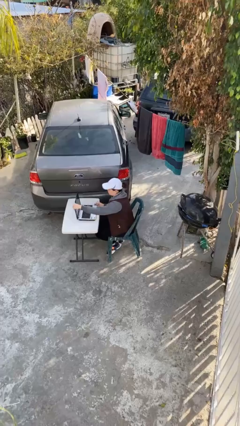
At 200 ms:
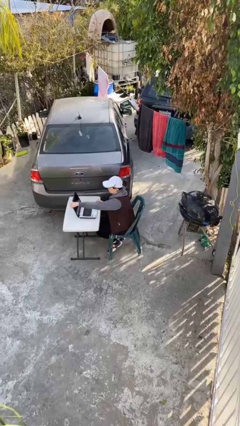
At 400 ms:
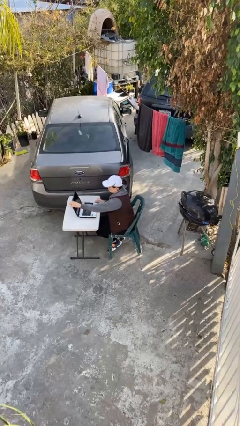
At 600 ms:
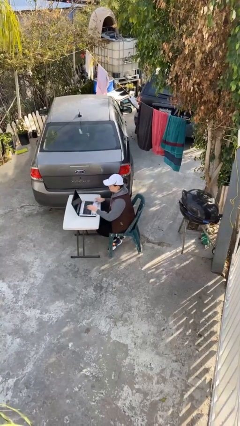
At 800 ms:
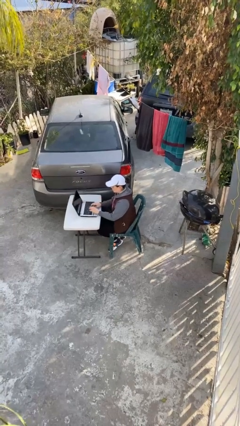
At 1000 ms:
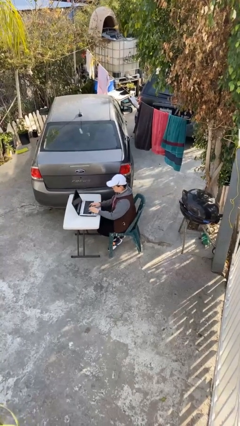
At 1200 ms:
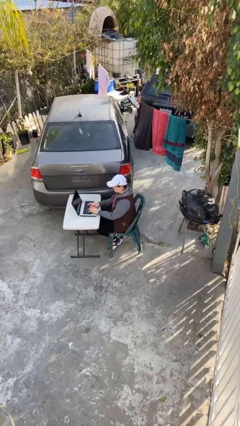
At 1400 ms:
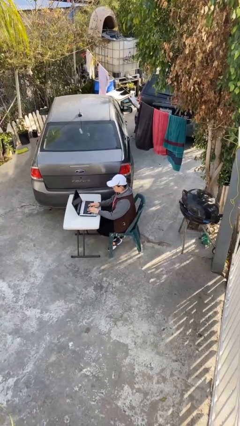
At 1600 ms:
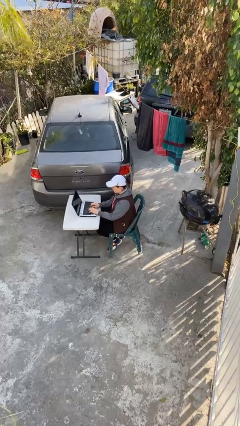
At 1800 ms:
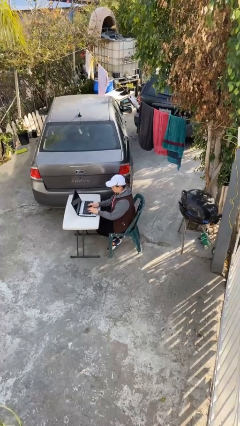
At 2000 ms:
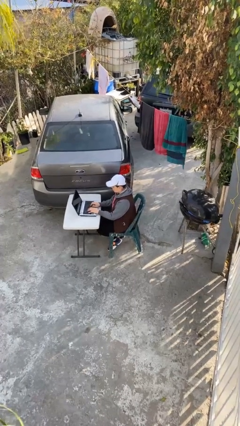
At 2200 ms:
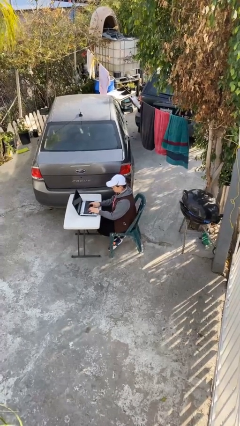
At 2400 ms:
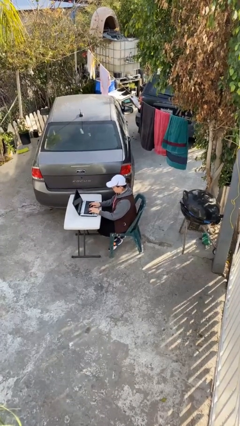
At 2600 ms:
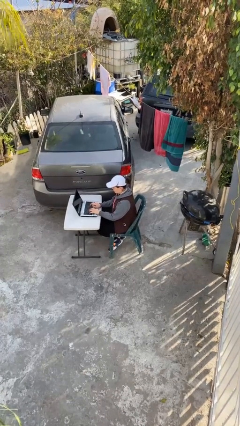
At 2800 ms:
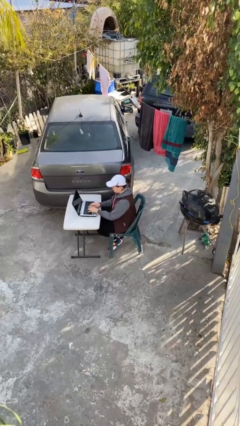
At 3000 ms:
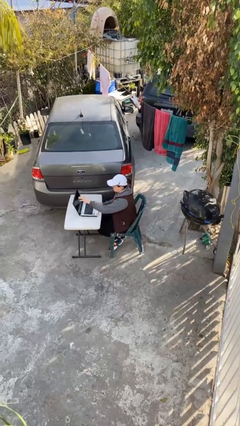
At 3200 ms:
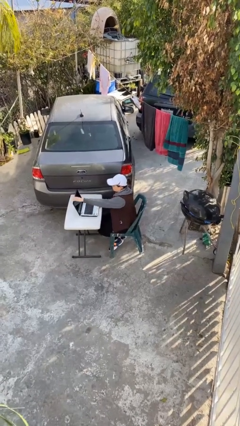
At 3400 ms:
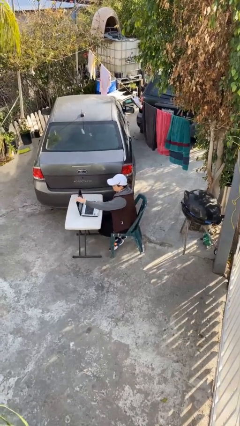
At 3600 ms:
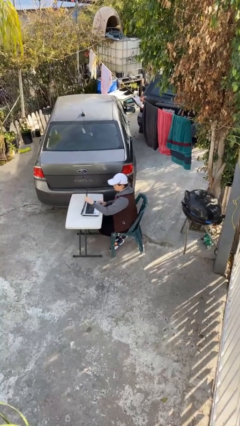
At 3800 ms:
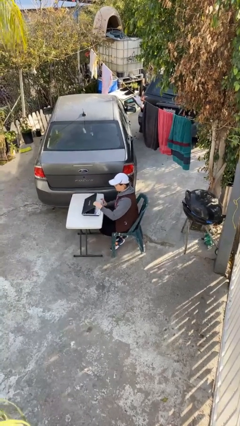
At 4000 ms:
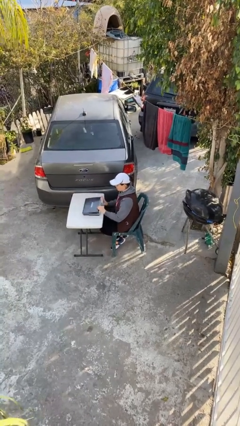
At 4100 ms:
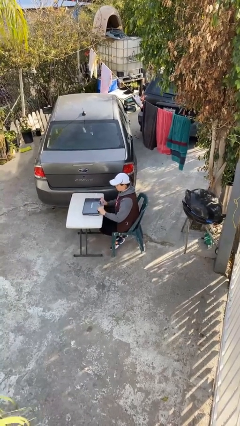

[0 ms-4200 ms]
person interacts with laptop

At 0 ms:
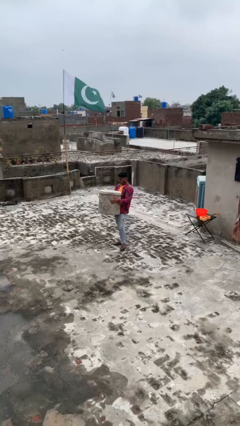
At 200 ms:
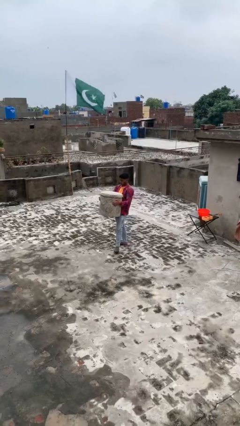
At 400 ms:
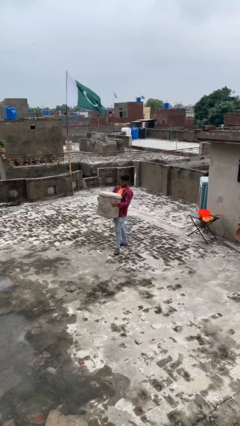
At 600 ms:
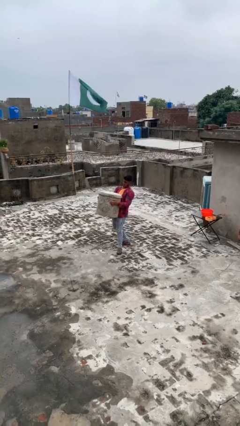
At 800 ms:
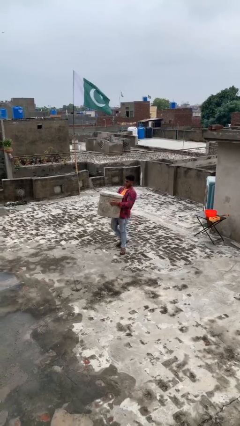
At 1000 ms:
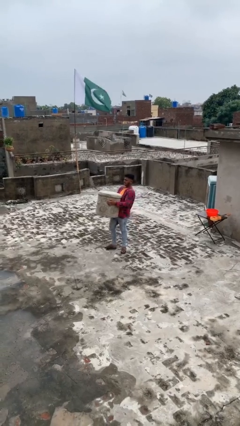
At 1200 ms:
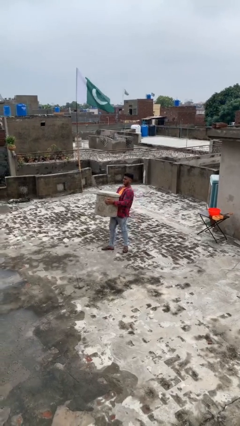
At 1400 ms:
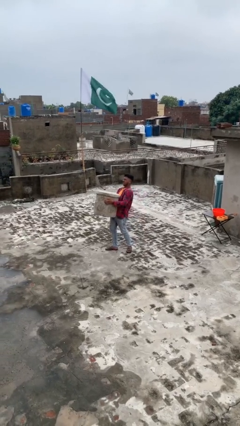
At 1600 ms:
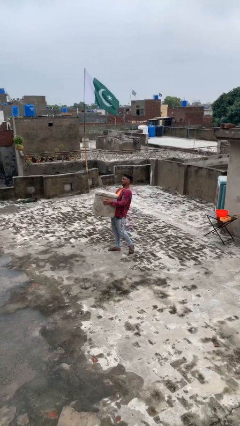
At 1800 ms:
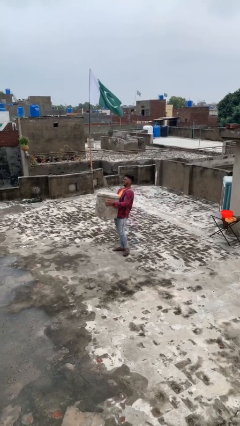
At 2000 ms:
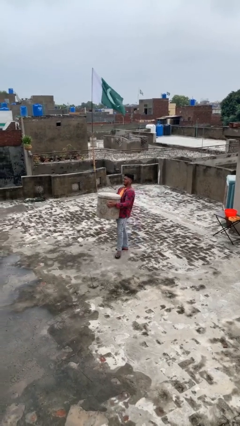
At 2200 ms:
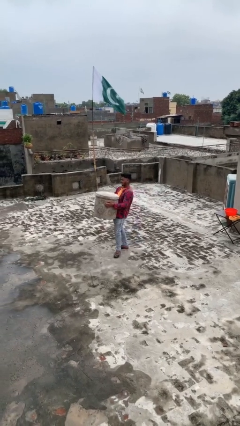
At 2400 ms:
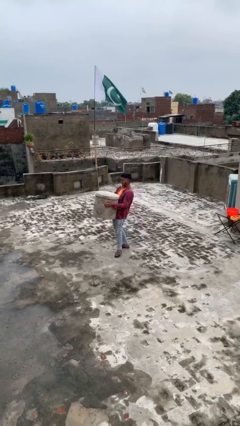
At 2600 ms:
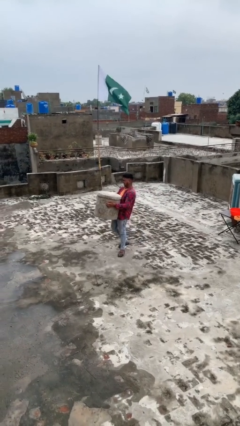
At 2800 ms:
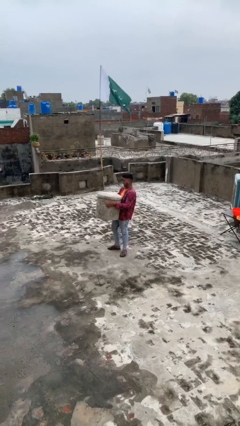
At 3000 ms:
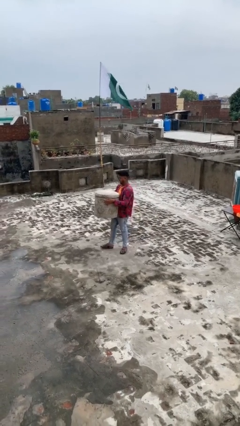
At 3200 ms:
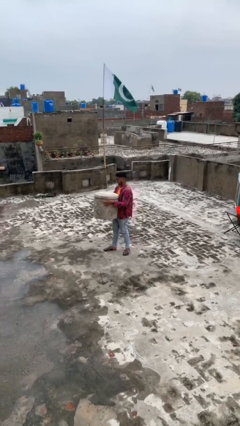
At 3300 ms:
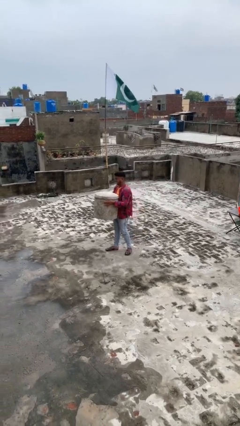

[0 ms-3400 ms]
person carries heavy object

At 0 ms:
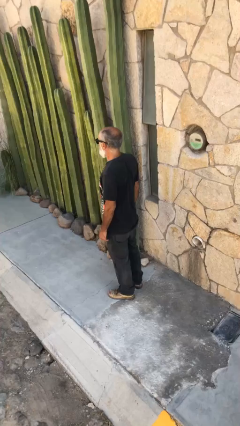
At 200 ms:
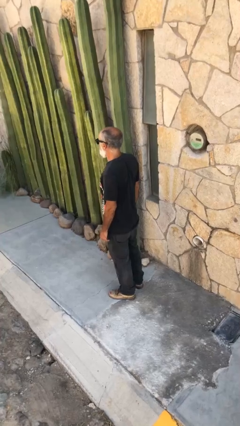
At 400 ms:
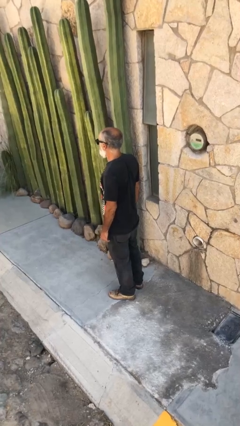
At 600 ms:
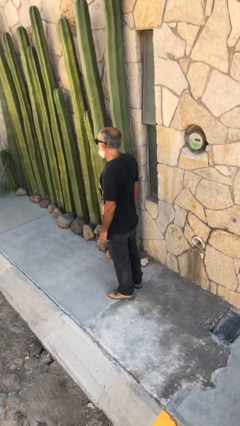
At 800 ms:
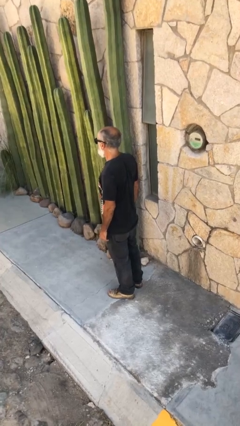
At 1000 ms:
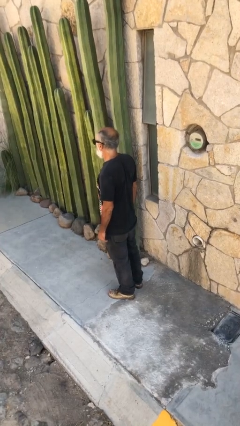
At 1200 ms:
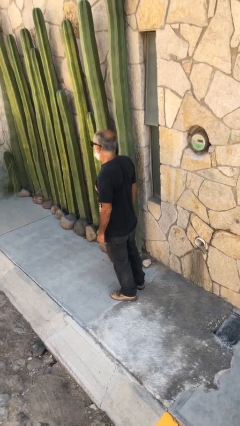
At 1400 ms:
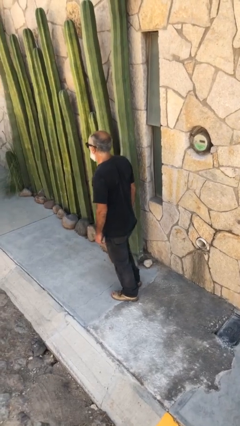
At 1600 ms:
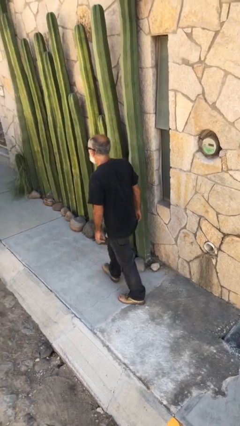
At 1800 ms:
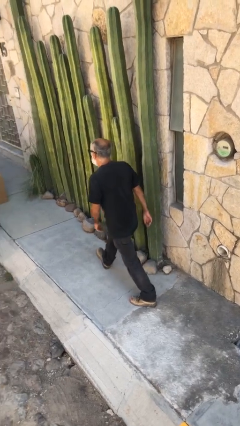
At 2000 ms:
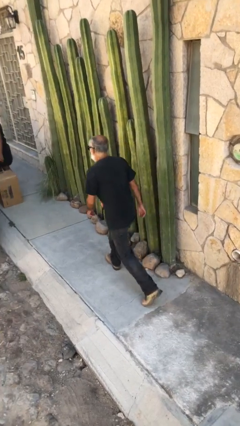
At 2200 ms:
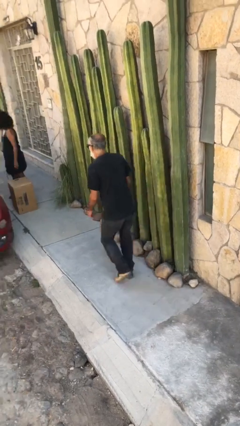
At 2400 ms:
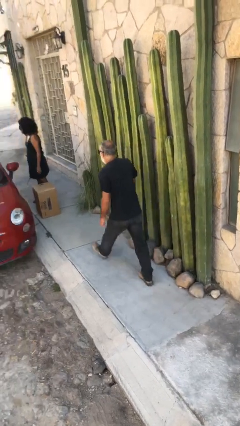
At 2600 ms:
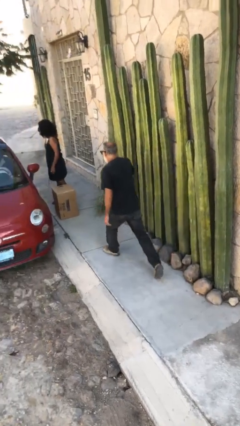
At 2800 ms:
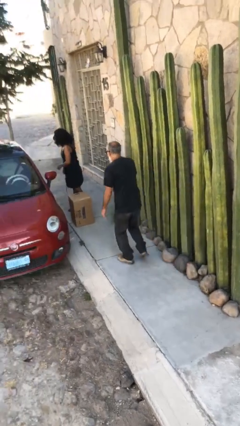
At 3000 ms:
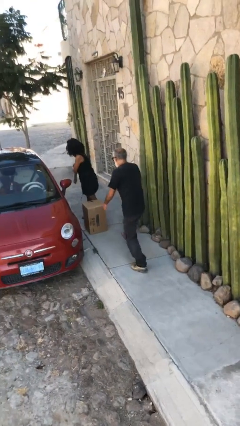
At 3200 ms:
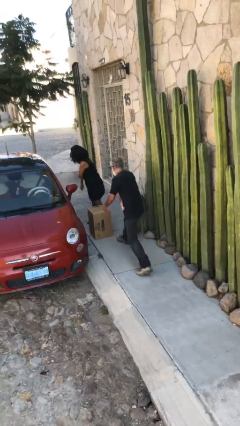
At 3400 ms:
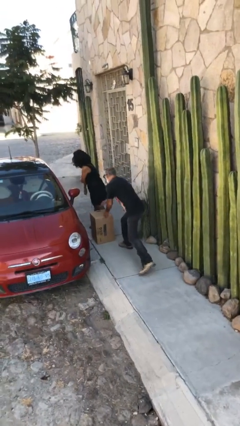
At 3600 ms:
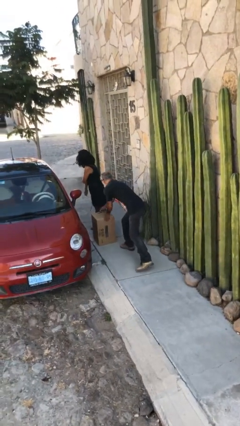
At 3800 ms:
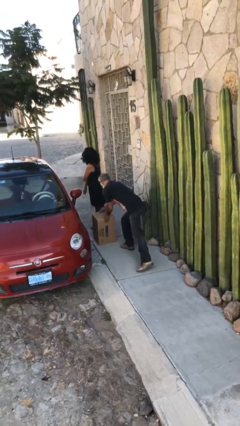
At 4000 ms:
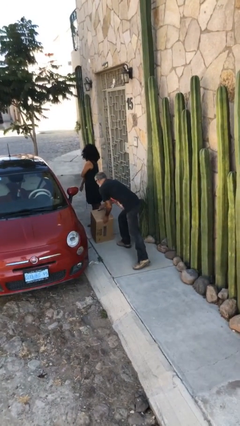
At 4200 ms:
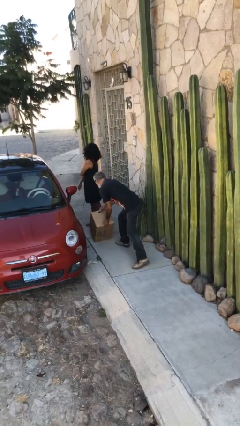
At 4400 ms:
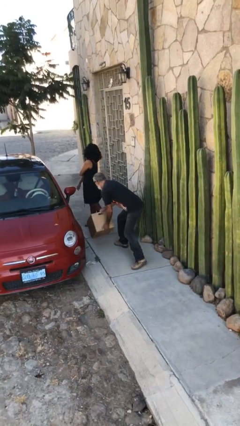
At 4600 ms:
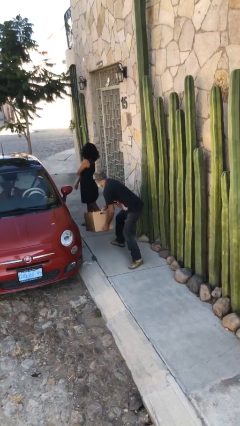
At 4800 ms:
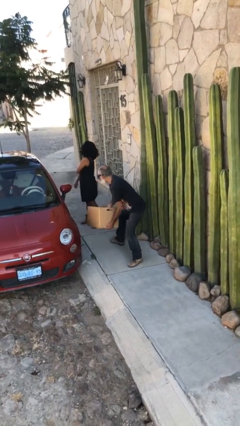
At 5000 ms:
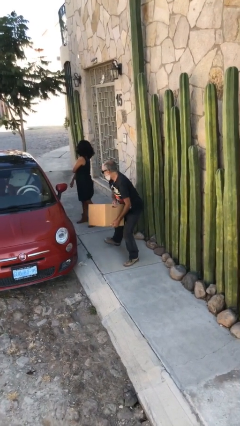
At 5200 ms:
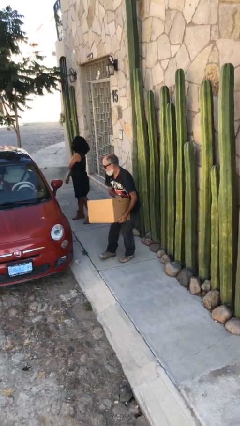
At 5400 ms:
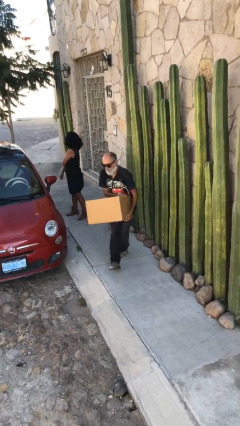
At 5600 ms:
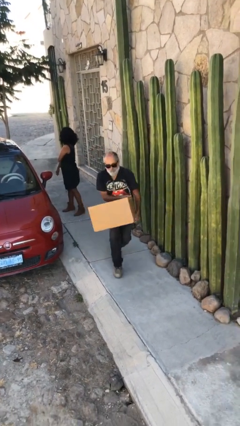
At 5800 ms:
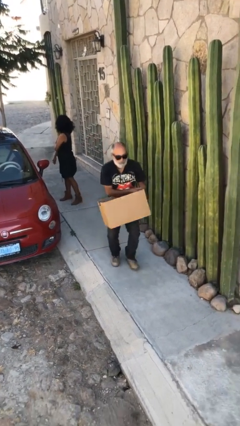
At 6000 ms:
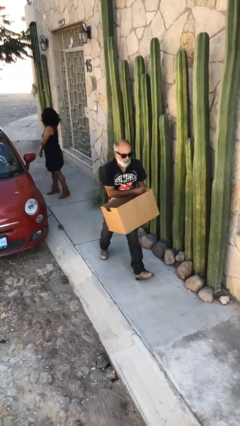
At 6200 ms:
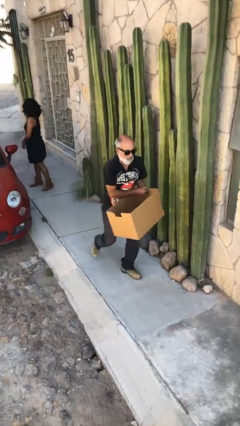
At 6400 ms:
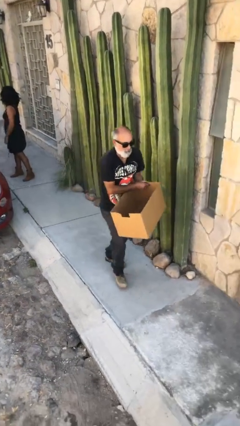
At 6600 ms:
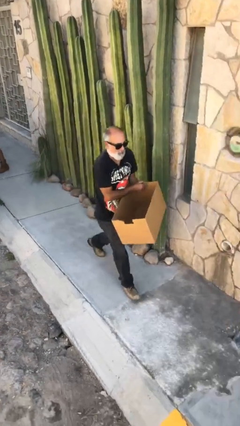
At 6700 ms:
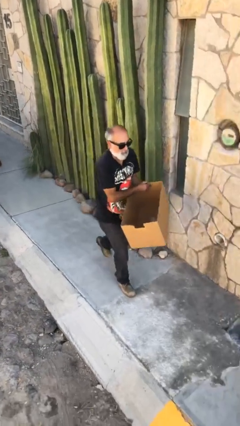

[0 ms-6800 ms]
person steals object from person

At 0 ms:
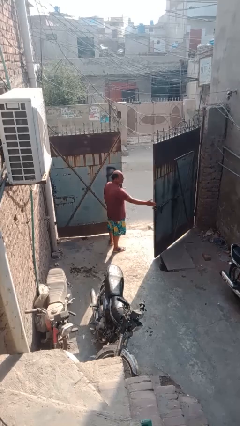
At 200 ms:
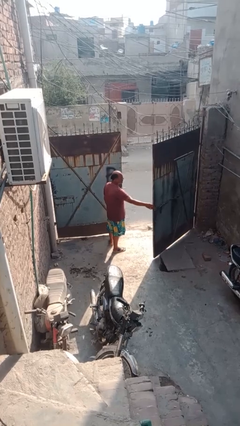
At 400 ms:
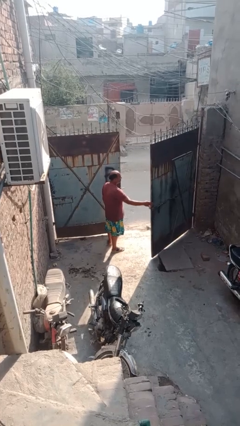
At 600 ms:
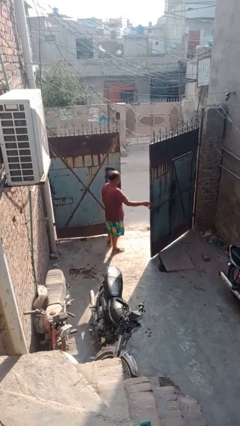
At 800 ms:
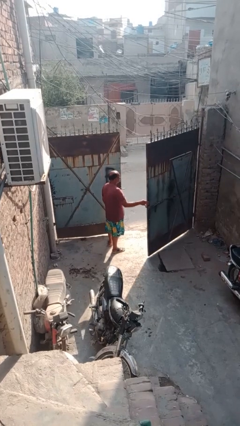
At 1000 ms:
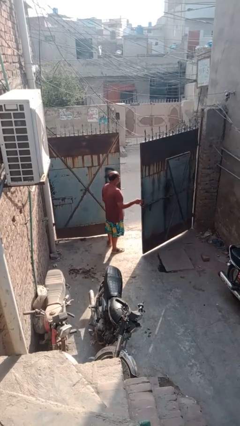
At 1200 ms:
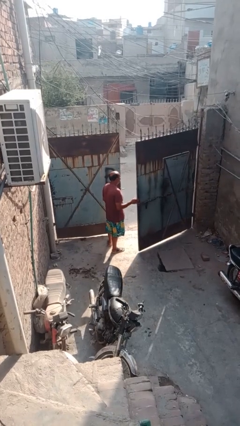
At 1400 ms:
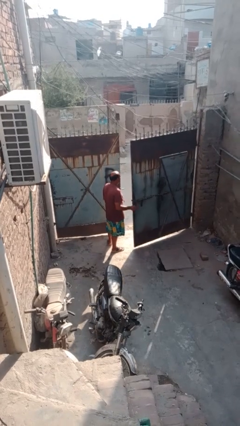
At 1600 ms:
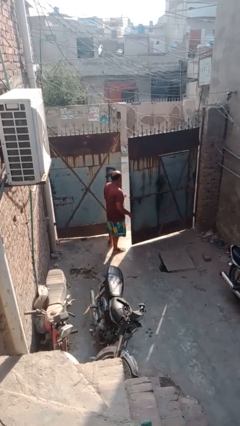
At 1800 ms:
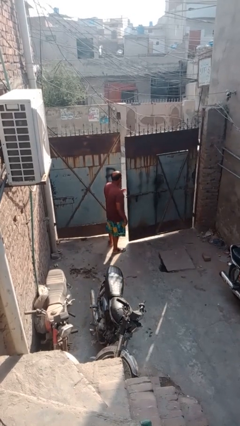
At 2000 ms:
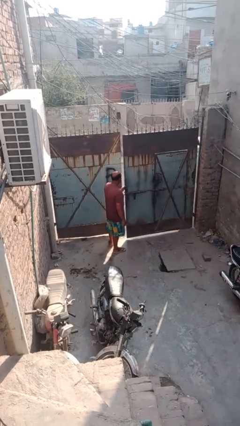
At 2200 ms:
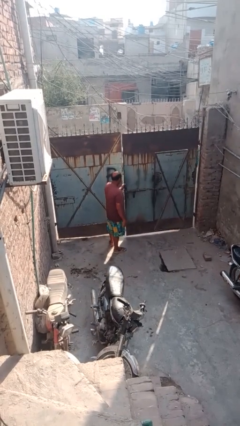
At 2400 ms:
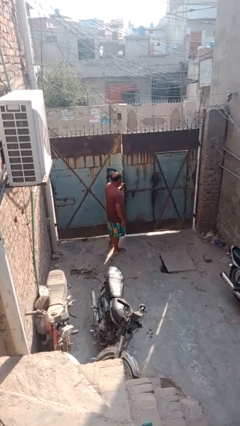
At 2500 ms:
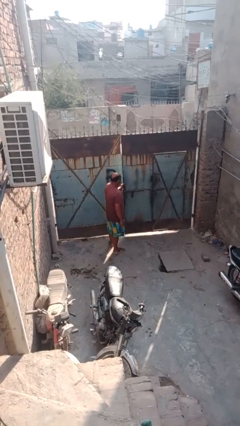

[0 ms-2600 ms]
person closes gate

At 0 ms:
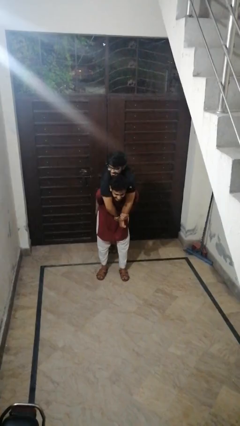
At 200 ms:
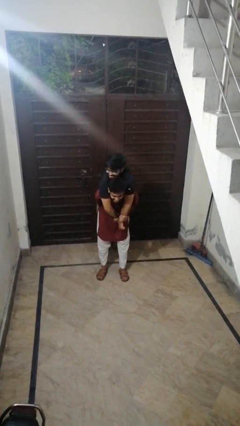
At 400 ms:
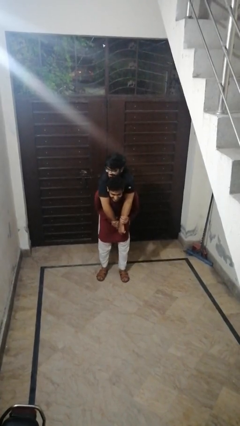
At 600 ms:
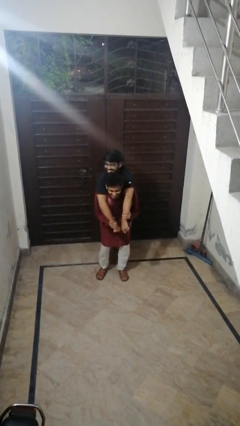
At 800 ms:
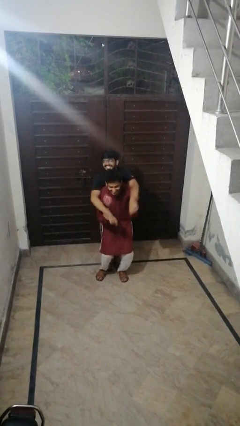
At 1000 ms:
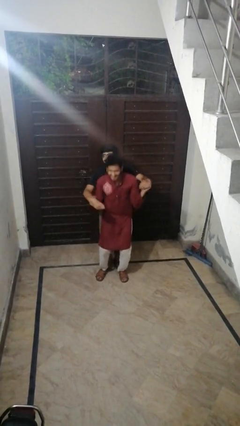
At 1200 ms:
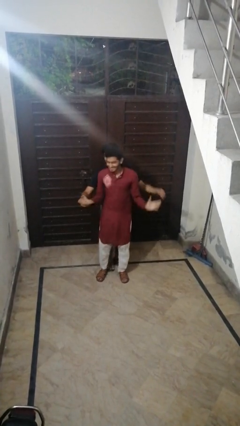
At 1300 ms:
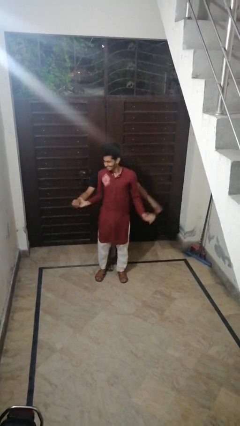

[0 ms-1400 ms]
person puts down person
